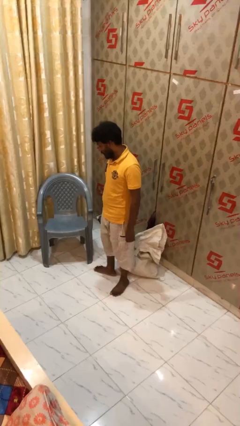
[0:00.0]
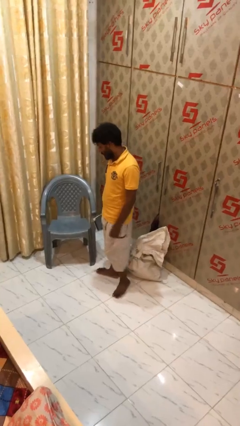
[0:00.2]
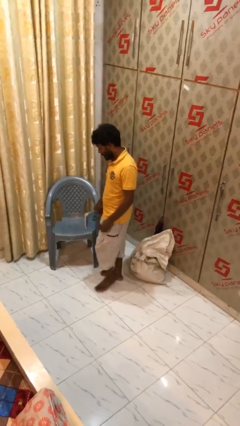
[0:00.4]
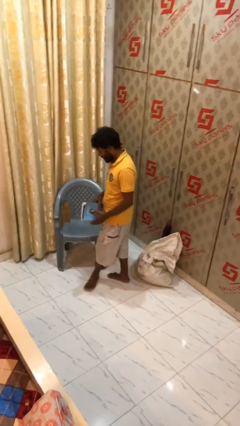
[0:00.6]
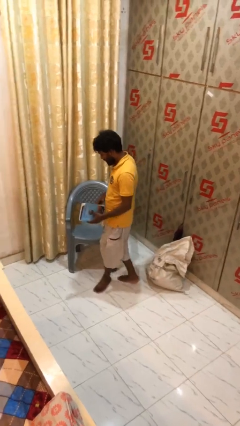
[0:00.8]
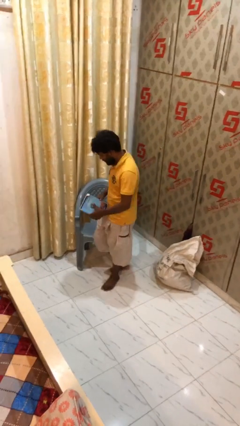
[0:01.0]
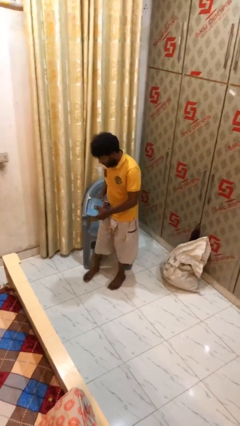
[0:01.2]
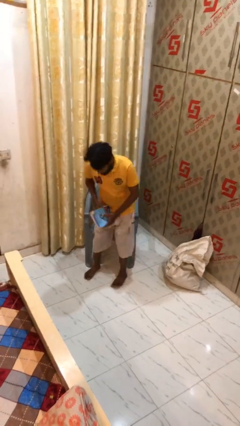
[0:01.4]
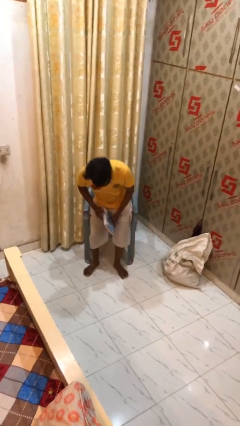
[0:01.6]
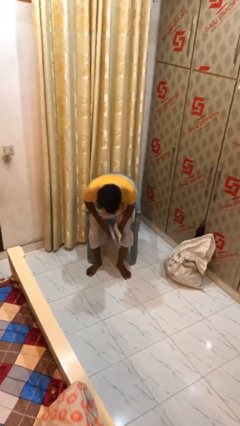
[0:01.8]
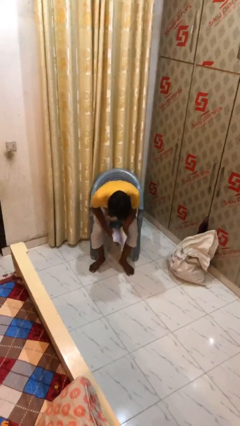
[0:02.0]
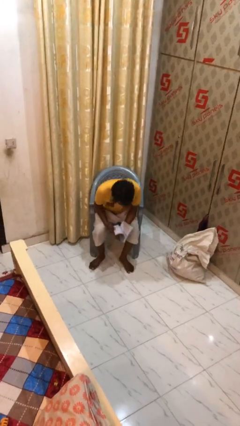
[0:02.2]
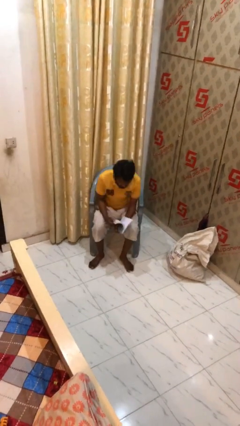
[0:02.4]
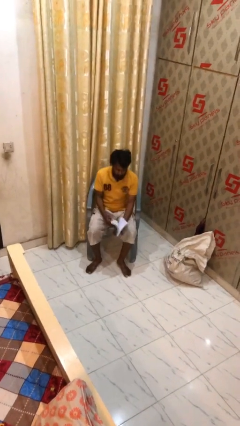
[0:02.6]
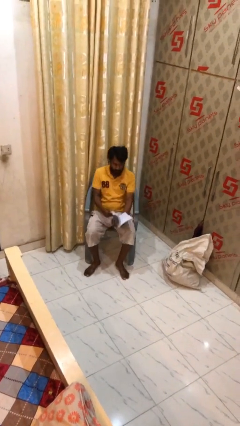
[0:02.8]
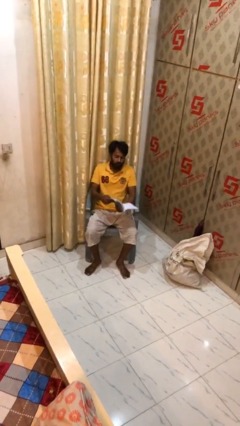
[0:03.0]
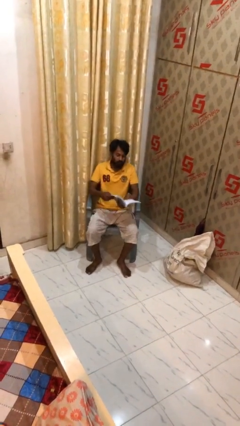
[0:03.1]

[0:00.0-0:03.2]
person sits down

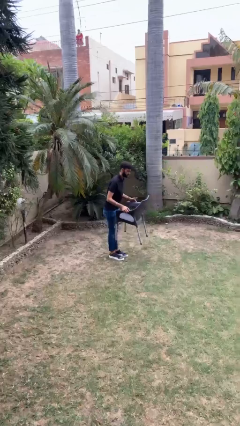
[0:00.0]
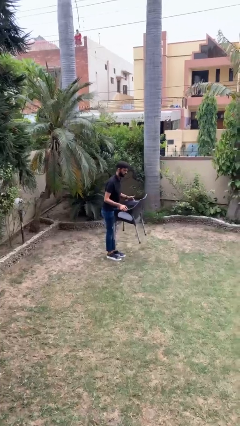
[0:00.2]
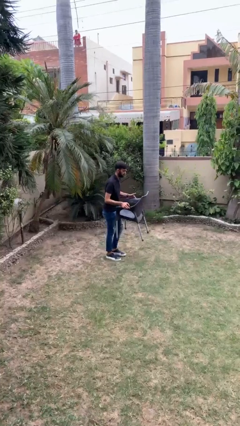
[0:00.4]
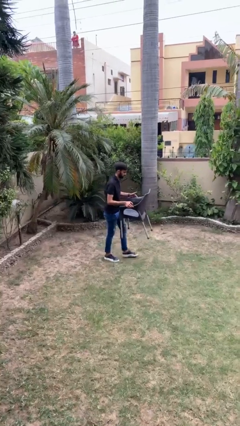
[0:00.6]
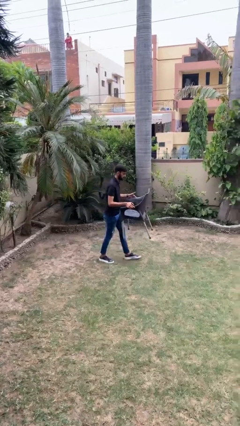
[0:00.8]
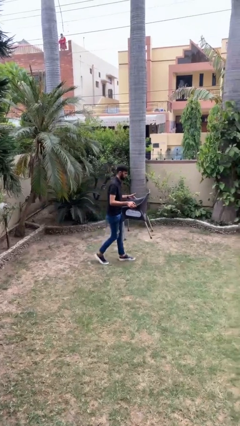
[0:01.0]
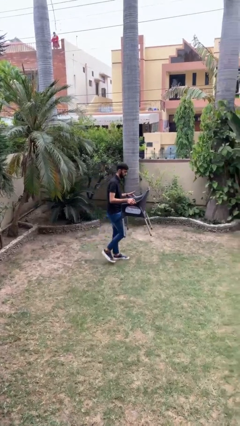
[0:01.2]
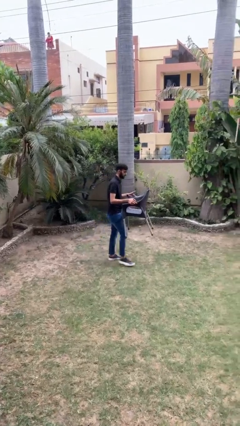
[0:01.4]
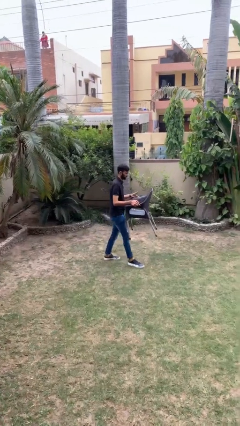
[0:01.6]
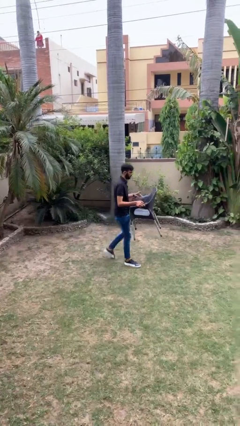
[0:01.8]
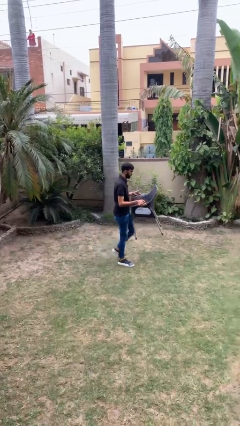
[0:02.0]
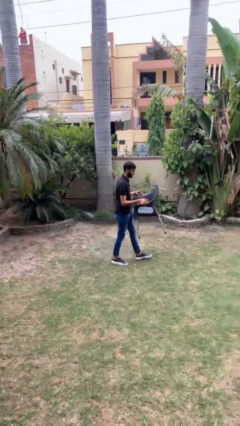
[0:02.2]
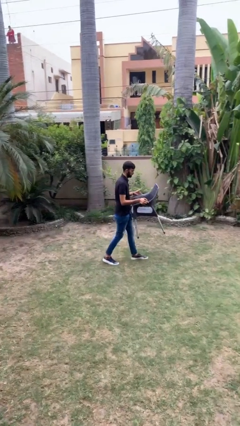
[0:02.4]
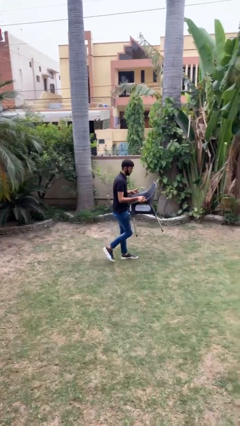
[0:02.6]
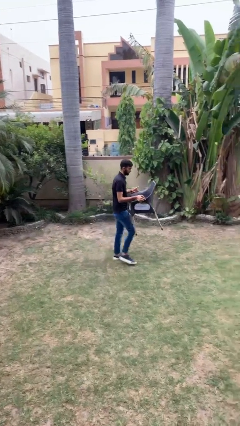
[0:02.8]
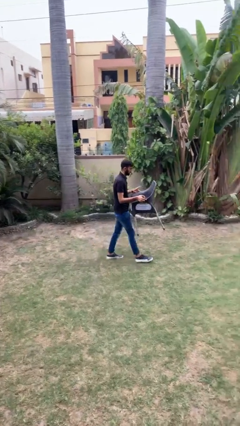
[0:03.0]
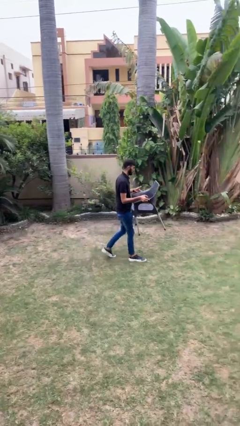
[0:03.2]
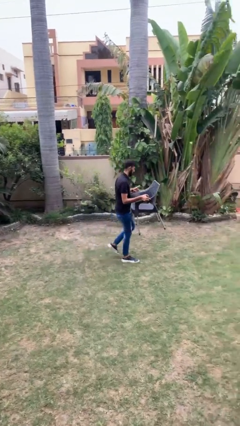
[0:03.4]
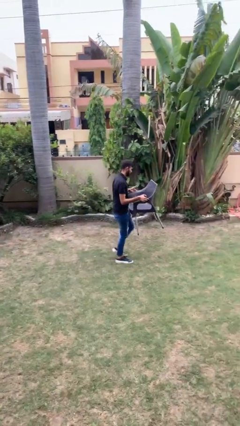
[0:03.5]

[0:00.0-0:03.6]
person carries heavy object

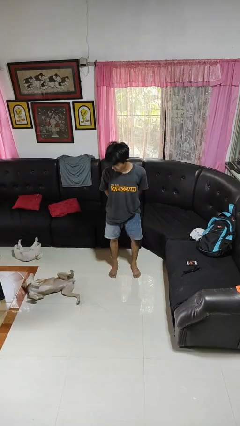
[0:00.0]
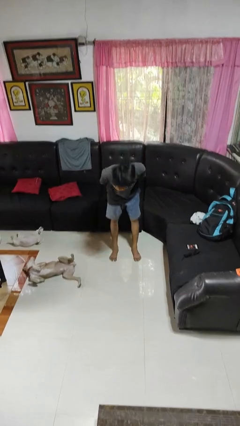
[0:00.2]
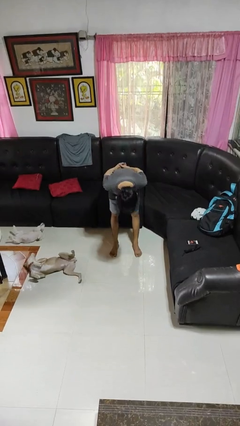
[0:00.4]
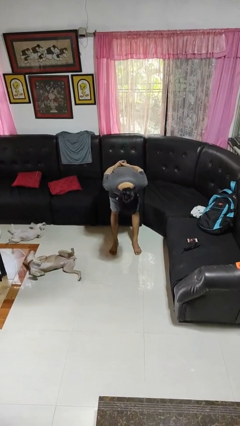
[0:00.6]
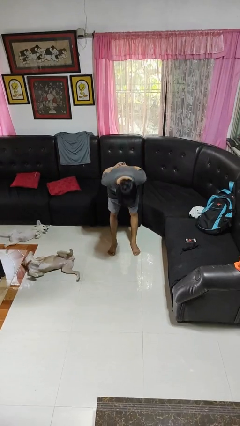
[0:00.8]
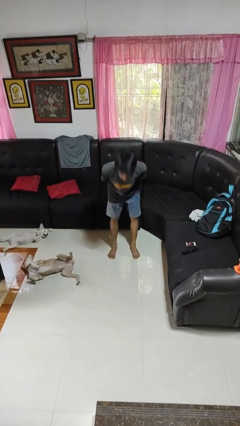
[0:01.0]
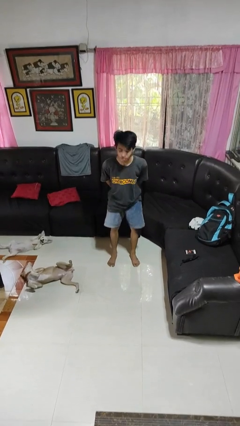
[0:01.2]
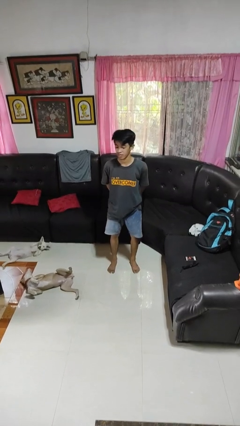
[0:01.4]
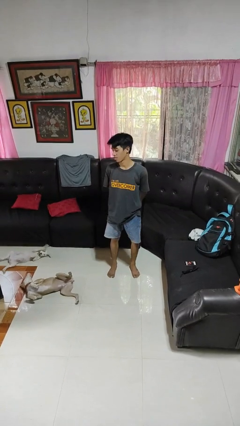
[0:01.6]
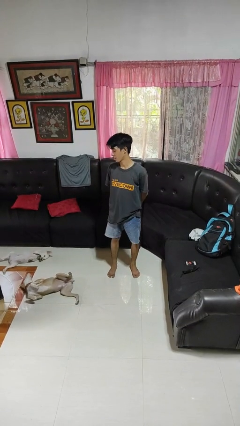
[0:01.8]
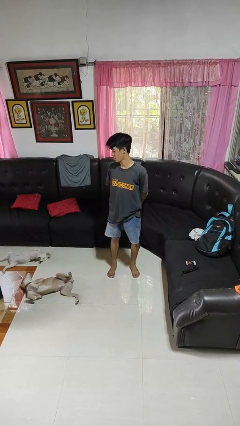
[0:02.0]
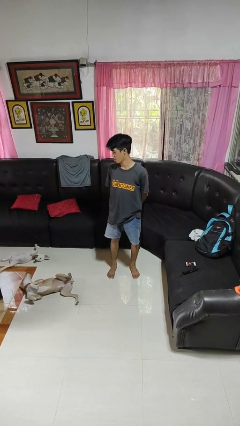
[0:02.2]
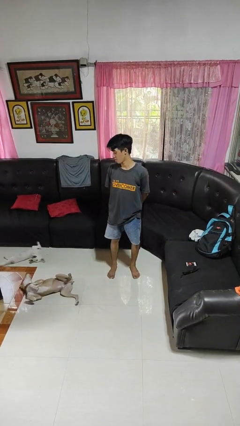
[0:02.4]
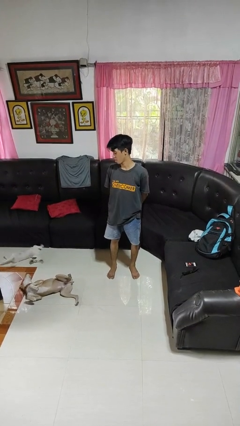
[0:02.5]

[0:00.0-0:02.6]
person bows

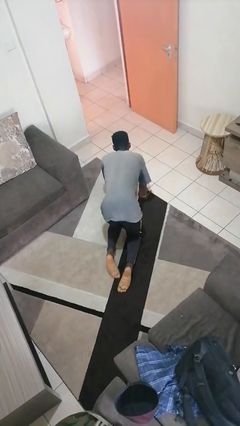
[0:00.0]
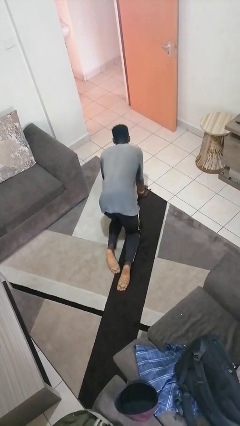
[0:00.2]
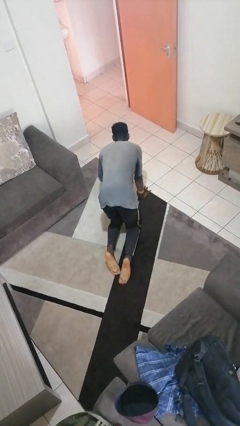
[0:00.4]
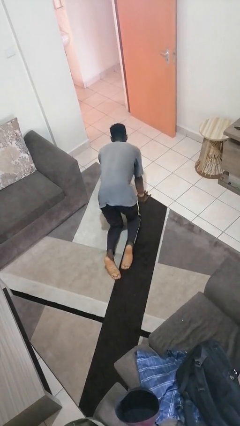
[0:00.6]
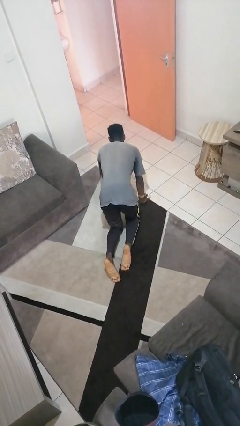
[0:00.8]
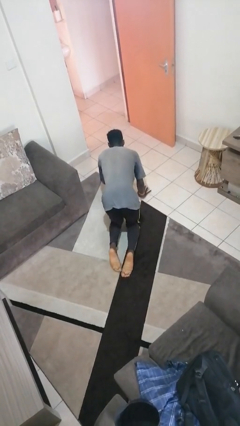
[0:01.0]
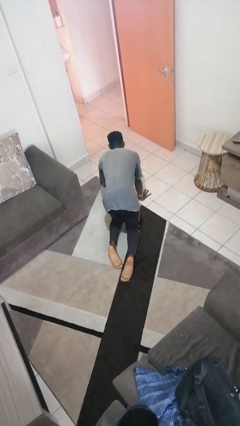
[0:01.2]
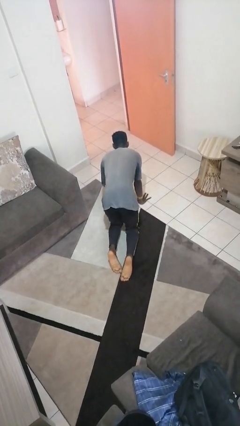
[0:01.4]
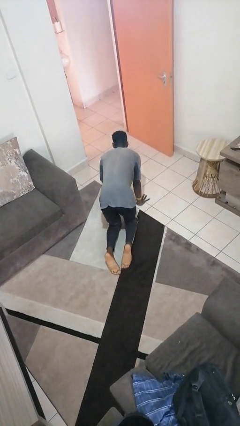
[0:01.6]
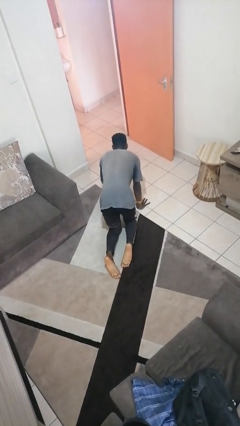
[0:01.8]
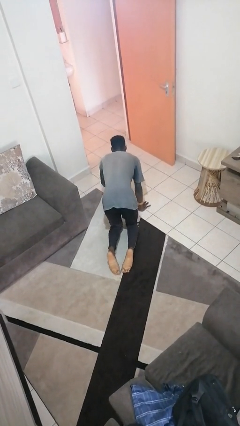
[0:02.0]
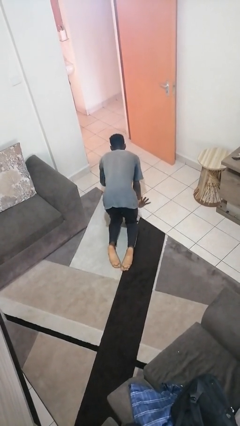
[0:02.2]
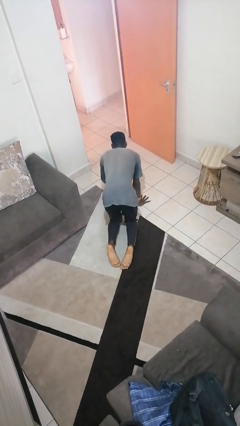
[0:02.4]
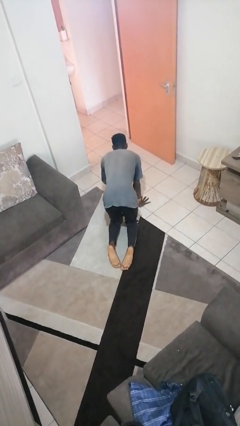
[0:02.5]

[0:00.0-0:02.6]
person crawls

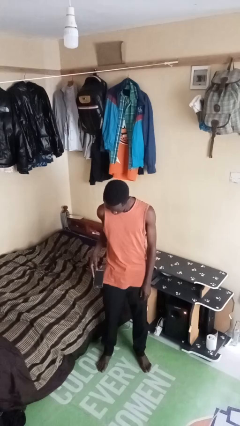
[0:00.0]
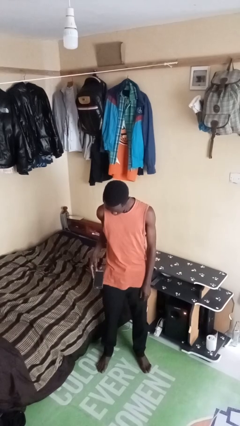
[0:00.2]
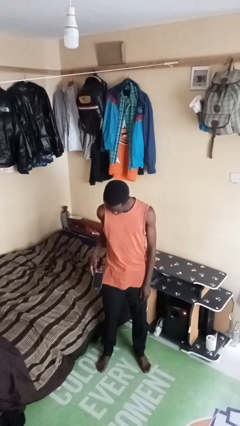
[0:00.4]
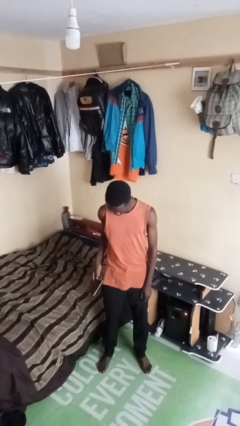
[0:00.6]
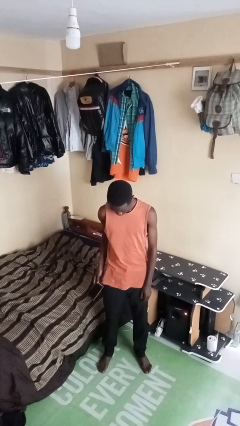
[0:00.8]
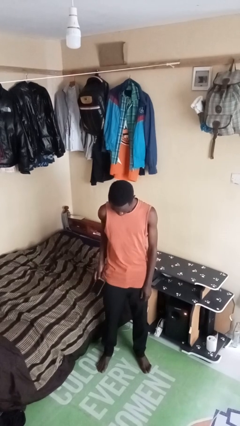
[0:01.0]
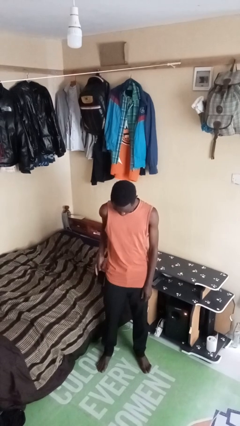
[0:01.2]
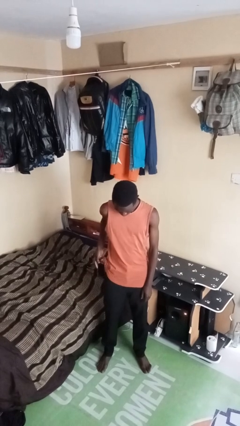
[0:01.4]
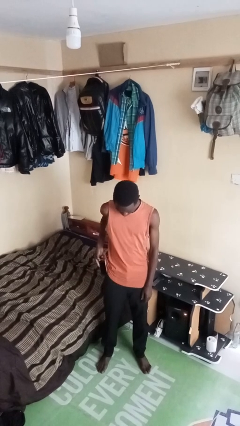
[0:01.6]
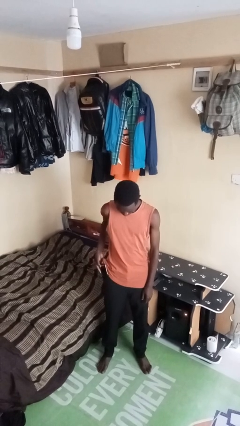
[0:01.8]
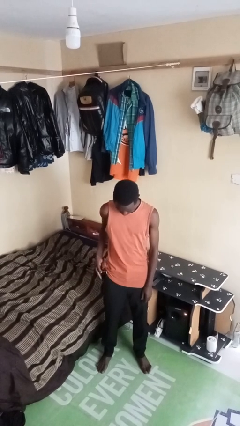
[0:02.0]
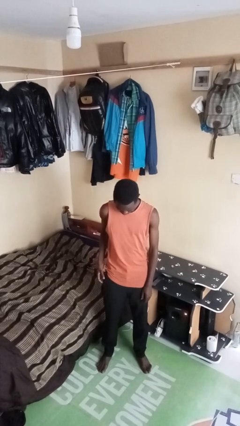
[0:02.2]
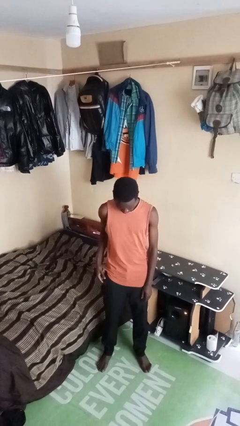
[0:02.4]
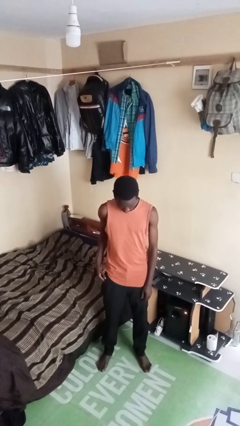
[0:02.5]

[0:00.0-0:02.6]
person puts phone into pocket

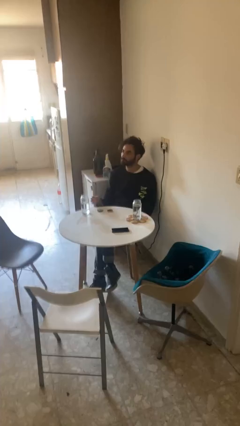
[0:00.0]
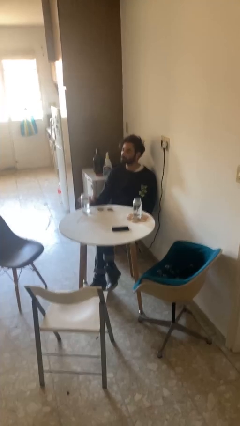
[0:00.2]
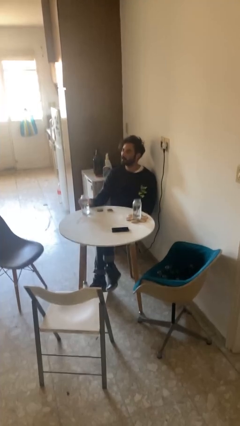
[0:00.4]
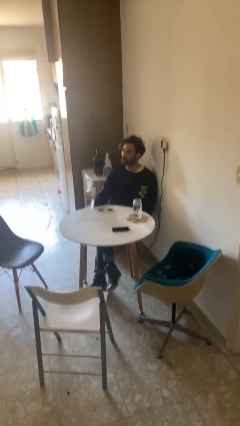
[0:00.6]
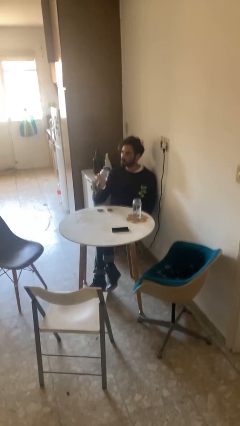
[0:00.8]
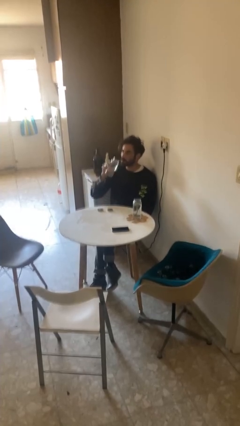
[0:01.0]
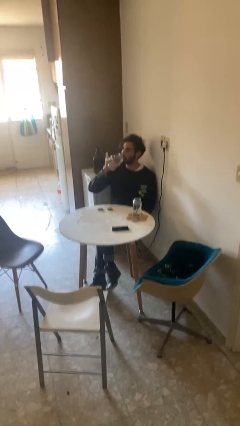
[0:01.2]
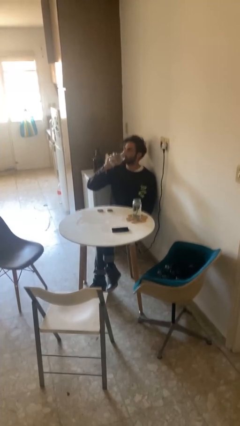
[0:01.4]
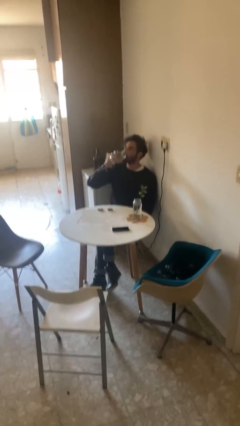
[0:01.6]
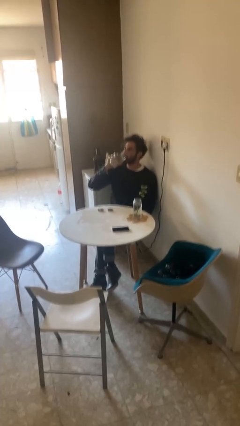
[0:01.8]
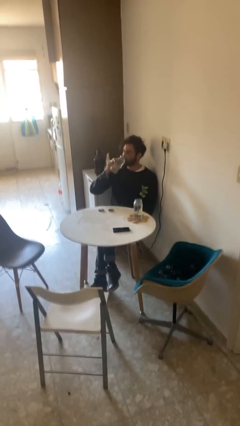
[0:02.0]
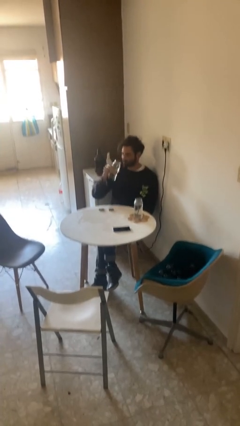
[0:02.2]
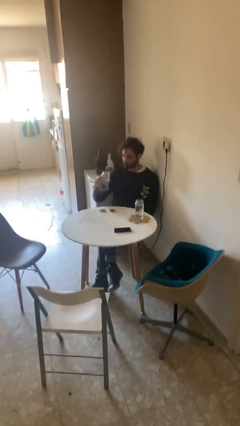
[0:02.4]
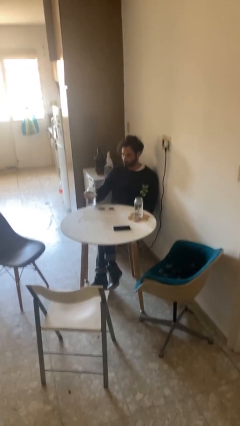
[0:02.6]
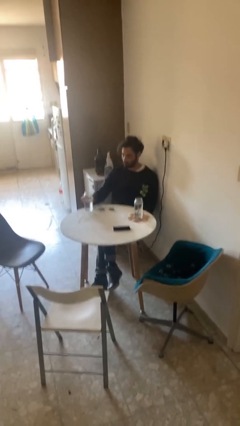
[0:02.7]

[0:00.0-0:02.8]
person drinks from cup
